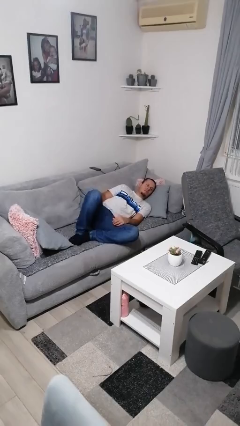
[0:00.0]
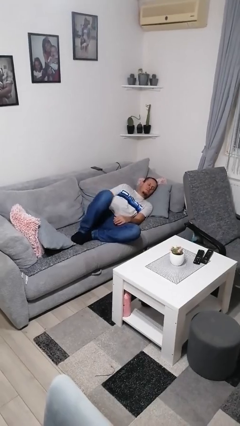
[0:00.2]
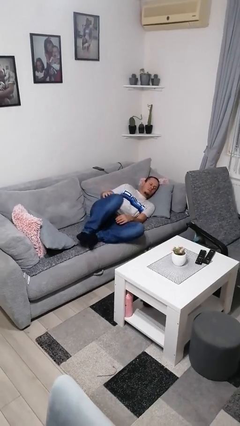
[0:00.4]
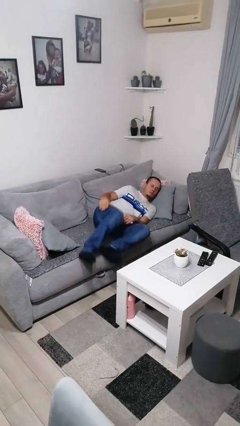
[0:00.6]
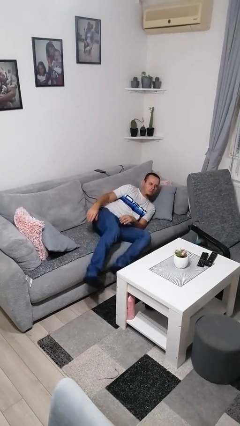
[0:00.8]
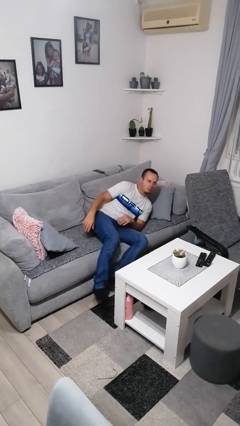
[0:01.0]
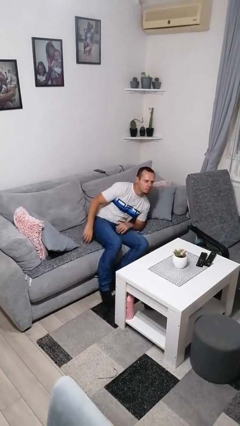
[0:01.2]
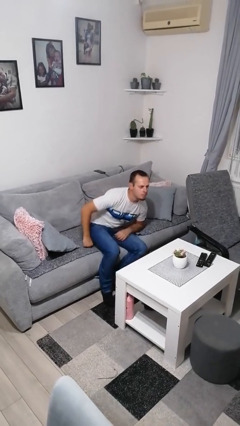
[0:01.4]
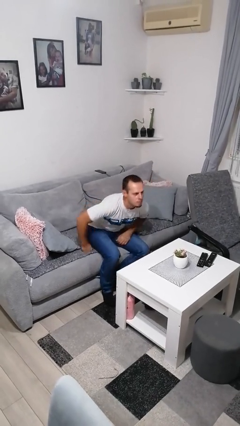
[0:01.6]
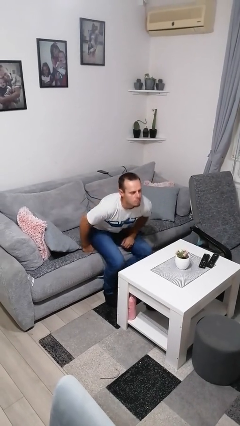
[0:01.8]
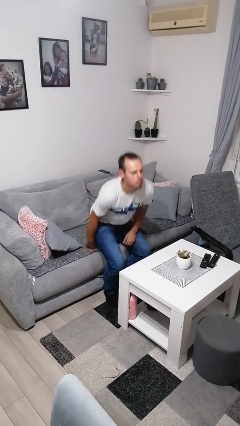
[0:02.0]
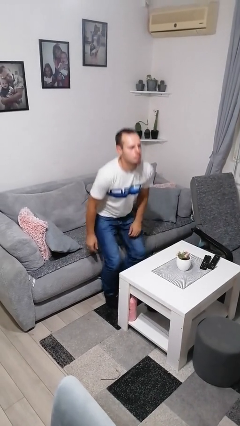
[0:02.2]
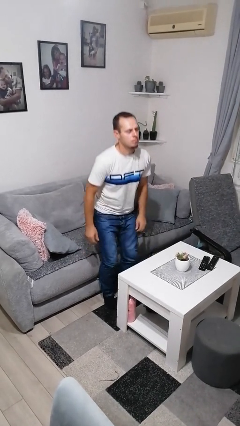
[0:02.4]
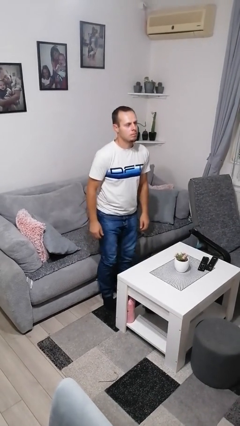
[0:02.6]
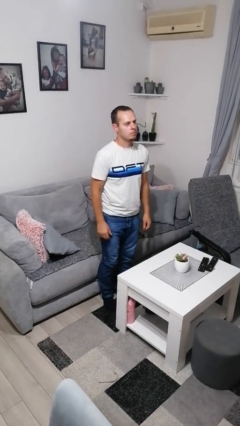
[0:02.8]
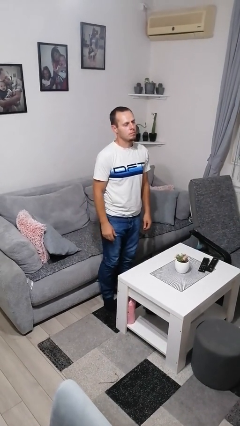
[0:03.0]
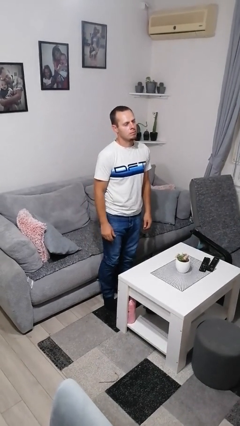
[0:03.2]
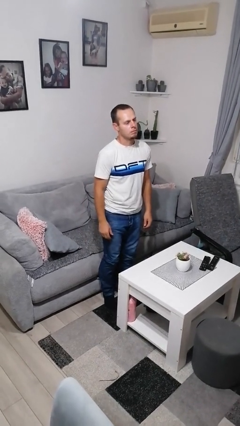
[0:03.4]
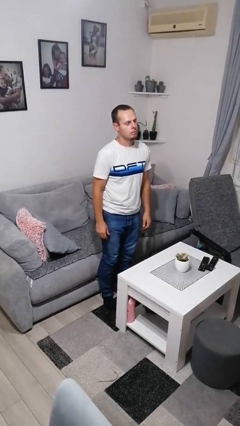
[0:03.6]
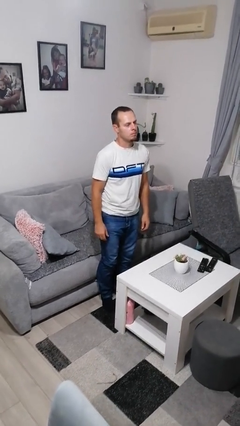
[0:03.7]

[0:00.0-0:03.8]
person stands up

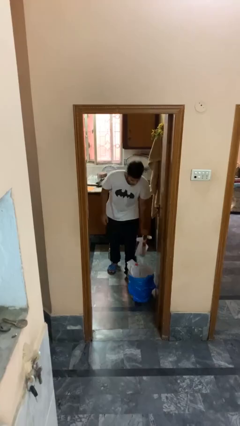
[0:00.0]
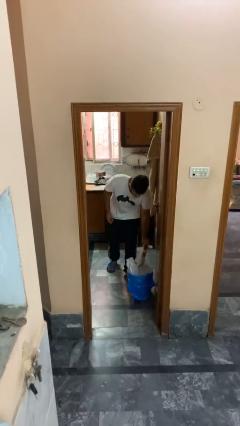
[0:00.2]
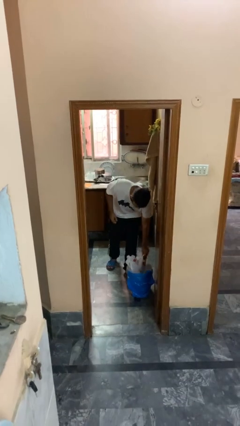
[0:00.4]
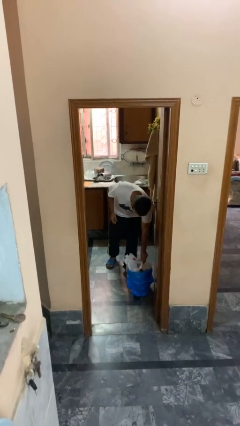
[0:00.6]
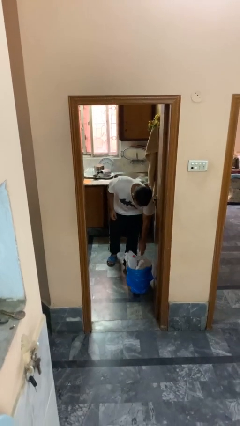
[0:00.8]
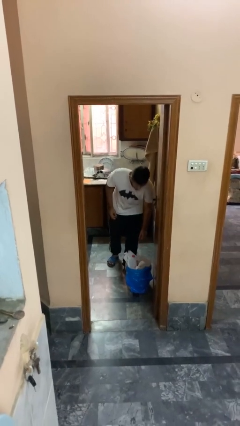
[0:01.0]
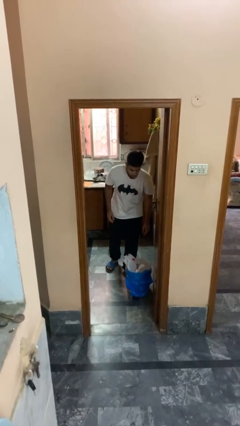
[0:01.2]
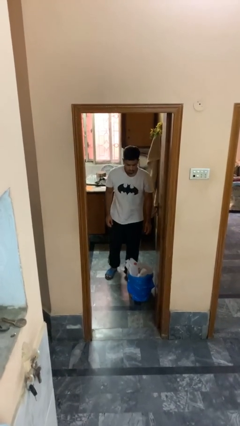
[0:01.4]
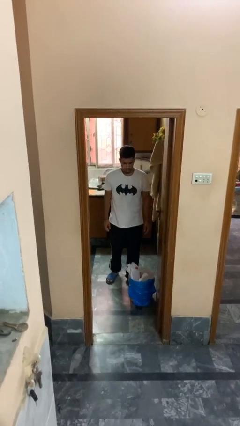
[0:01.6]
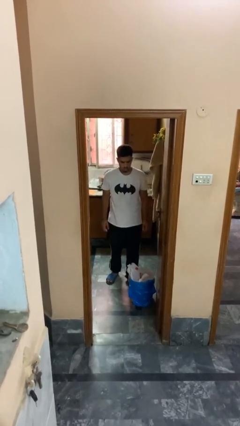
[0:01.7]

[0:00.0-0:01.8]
person discards trash

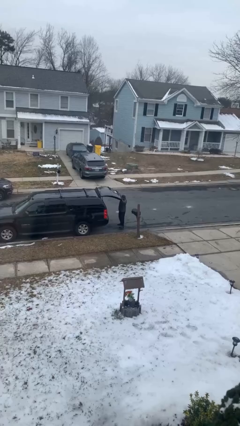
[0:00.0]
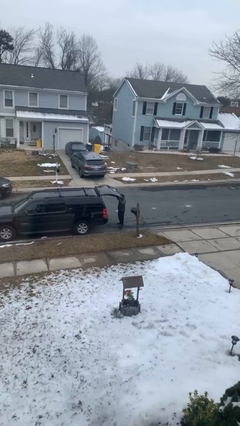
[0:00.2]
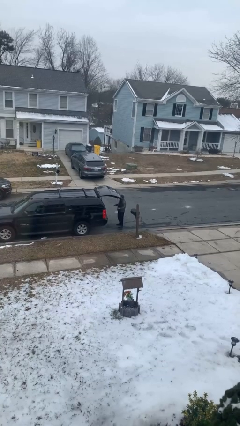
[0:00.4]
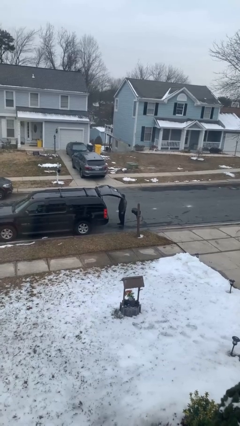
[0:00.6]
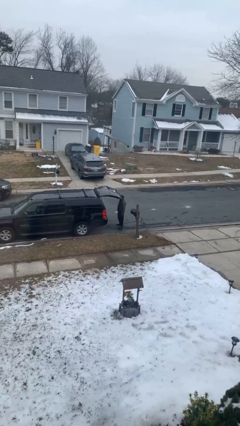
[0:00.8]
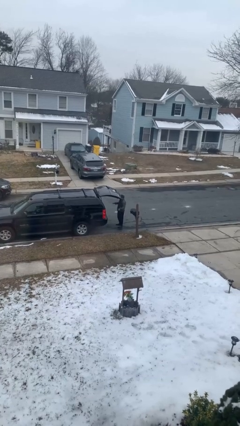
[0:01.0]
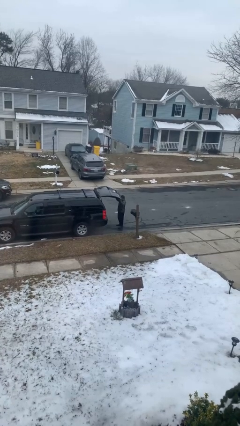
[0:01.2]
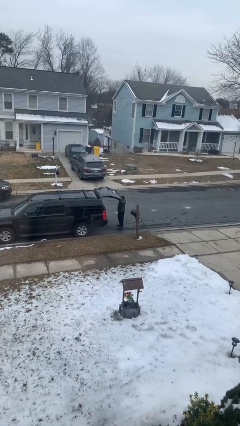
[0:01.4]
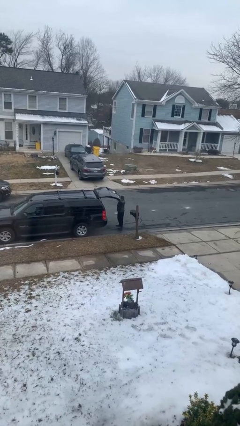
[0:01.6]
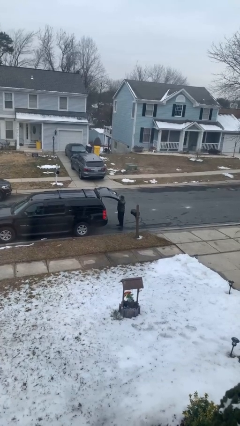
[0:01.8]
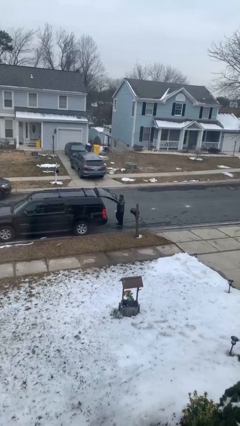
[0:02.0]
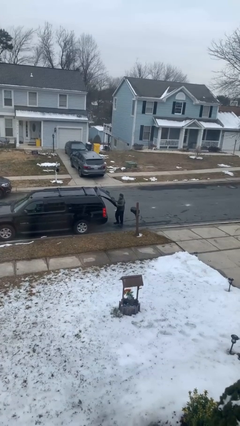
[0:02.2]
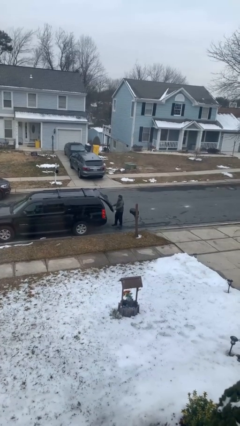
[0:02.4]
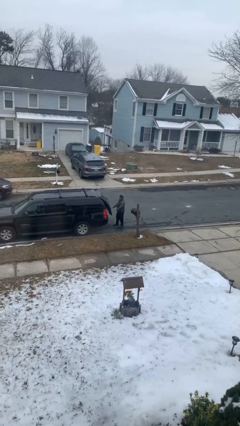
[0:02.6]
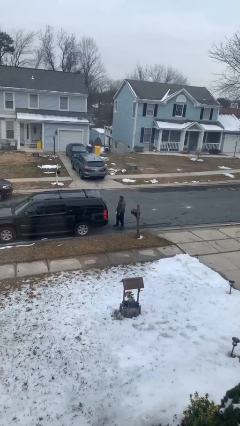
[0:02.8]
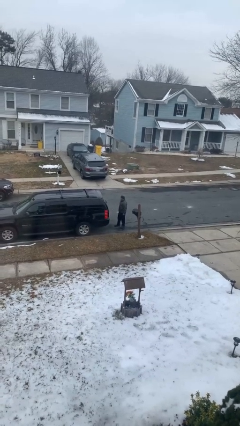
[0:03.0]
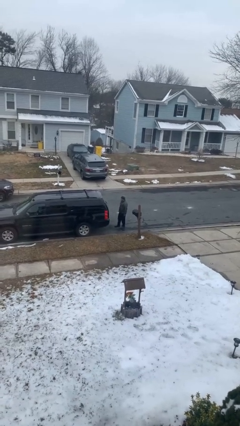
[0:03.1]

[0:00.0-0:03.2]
person closes car trunk

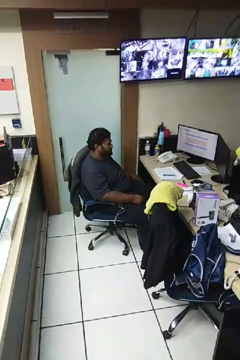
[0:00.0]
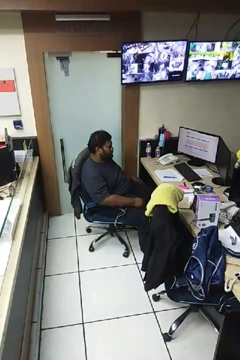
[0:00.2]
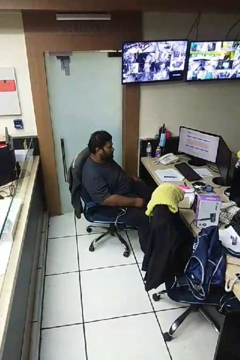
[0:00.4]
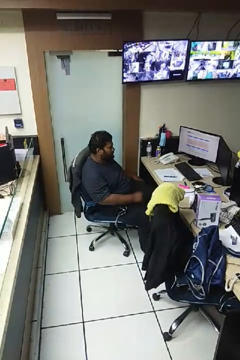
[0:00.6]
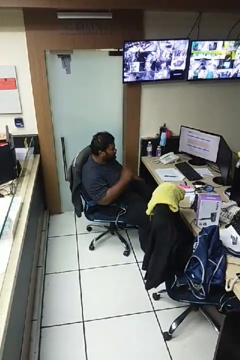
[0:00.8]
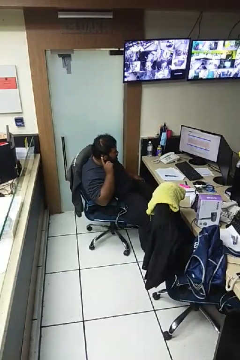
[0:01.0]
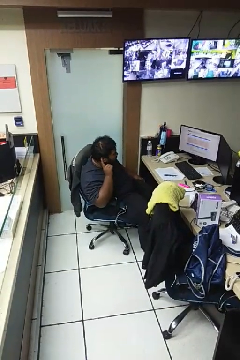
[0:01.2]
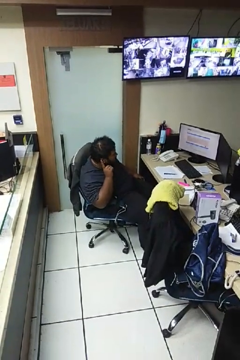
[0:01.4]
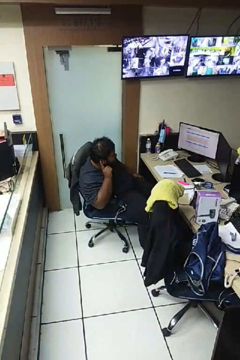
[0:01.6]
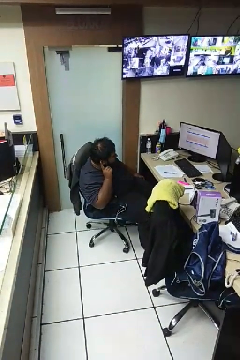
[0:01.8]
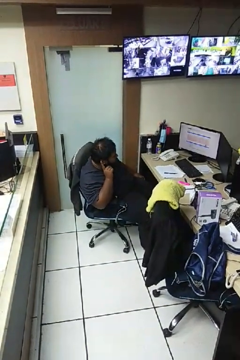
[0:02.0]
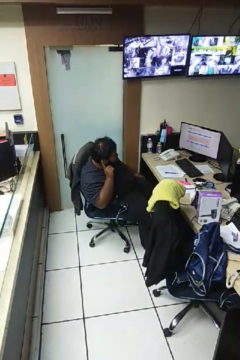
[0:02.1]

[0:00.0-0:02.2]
person gestures listen closely

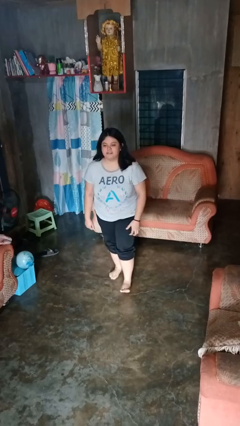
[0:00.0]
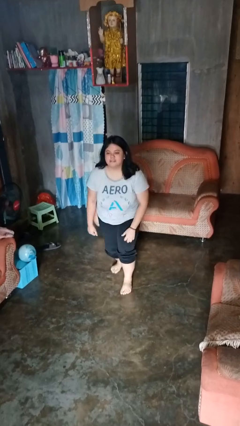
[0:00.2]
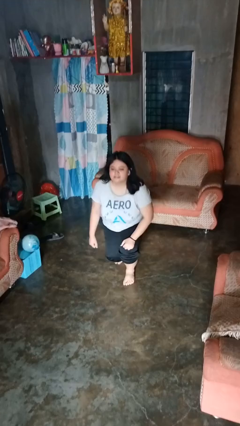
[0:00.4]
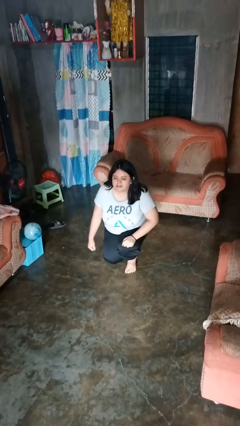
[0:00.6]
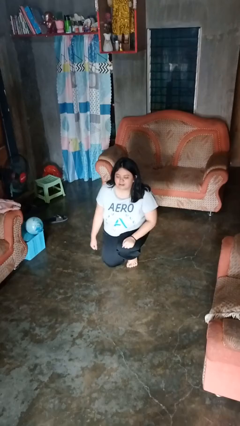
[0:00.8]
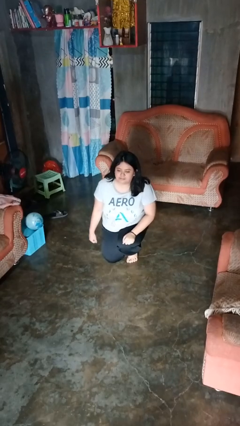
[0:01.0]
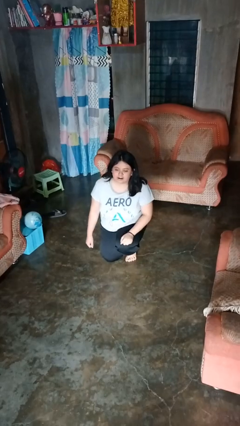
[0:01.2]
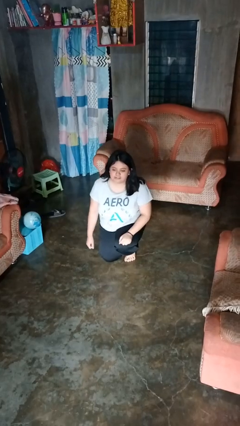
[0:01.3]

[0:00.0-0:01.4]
person kneels

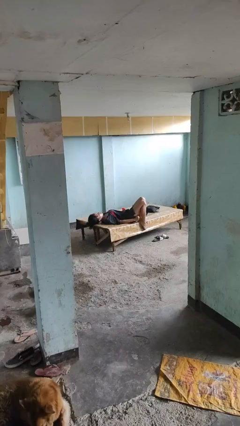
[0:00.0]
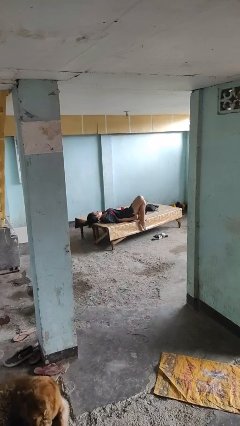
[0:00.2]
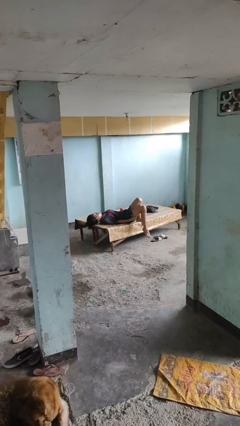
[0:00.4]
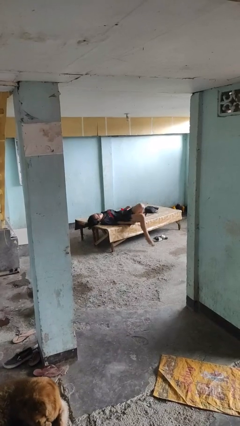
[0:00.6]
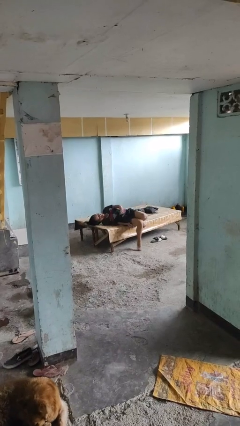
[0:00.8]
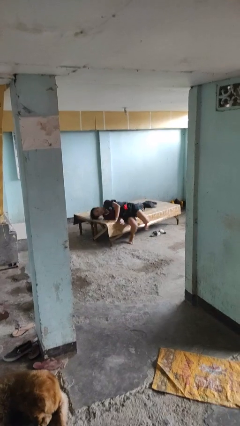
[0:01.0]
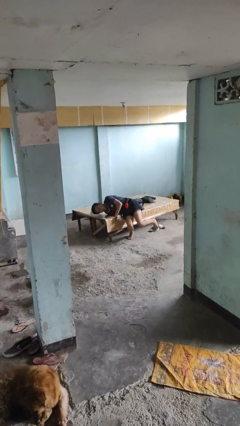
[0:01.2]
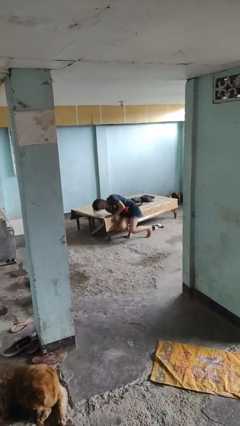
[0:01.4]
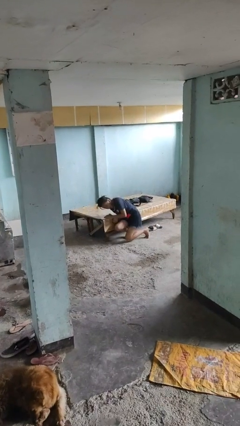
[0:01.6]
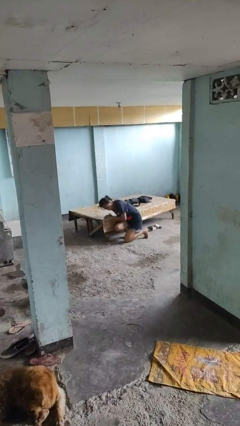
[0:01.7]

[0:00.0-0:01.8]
person falls from bed

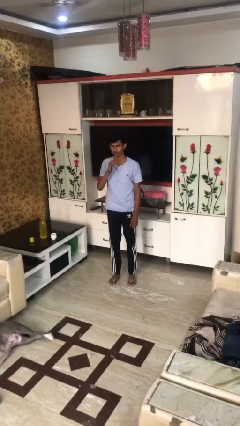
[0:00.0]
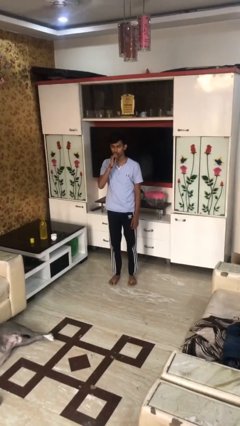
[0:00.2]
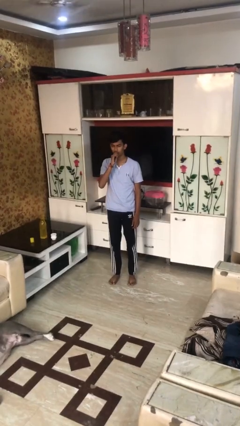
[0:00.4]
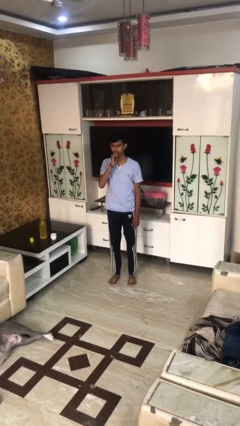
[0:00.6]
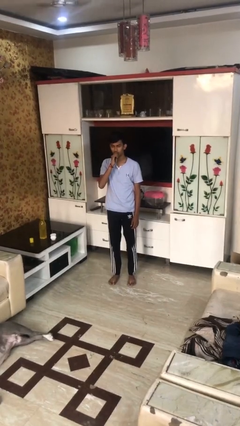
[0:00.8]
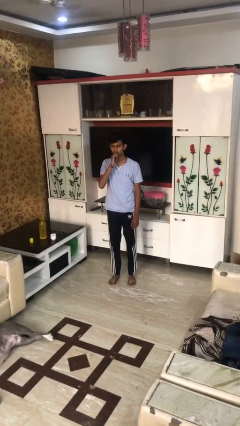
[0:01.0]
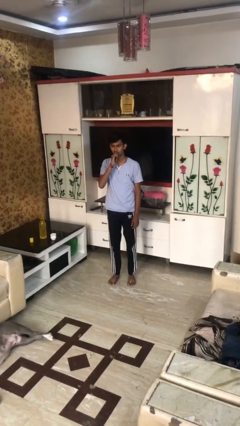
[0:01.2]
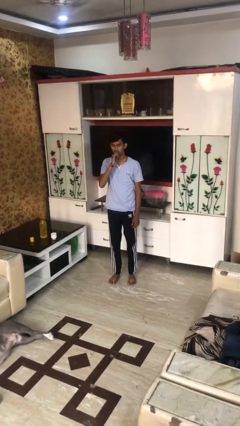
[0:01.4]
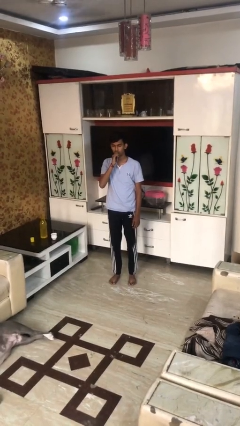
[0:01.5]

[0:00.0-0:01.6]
person vapes

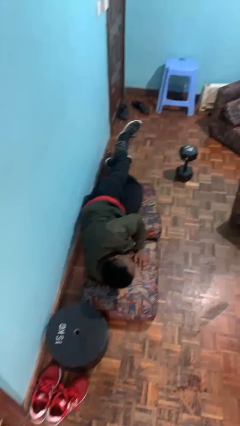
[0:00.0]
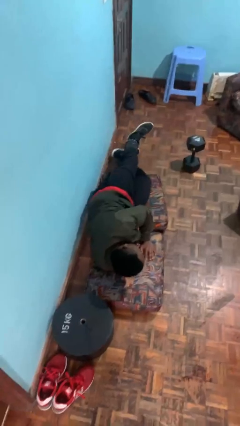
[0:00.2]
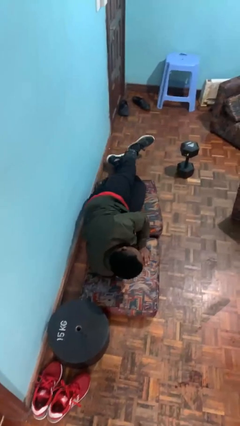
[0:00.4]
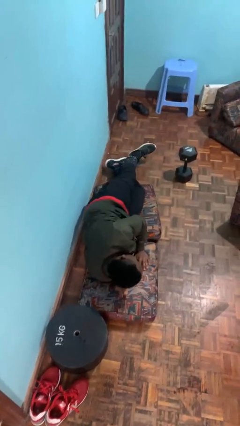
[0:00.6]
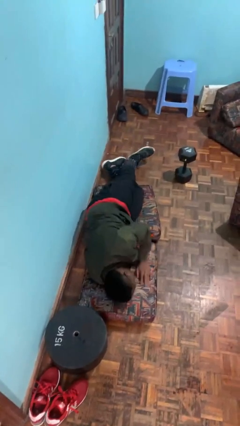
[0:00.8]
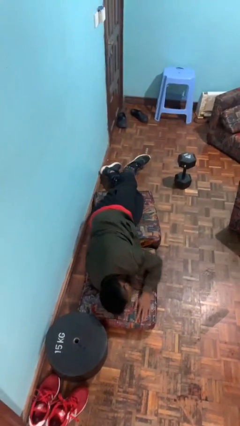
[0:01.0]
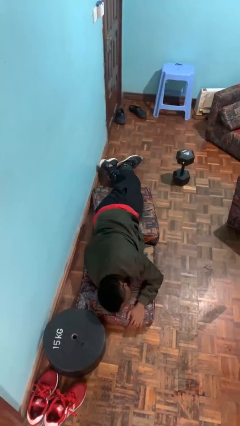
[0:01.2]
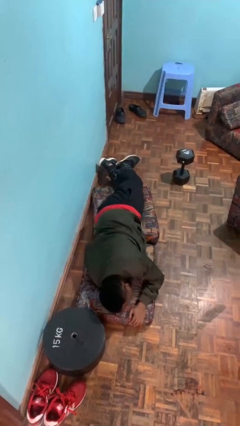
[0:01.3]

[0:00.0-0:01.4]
person lies down on floor
